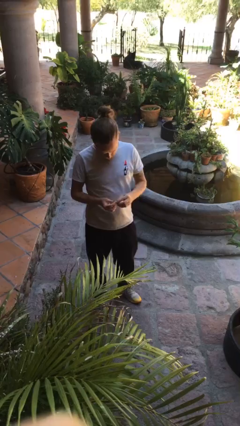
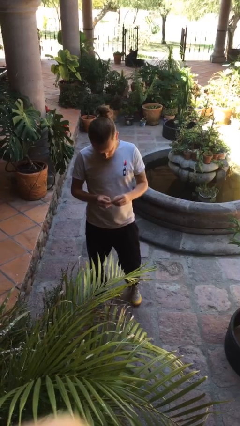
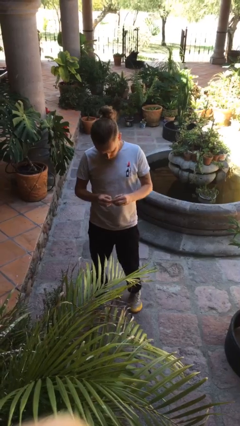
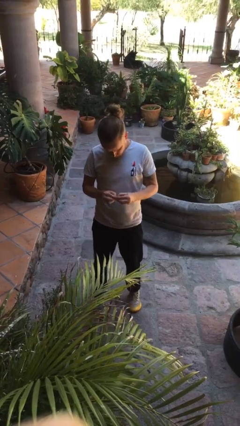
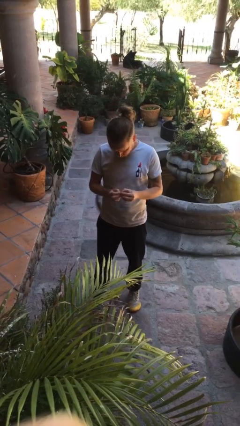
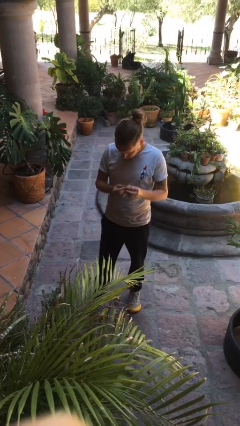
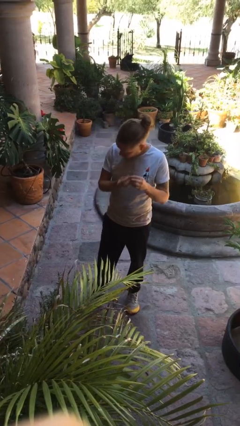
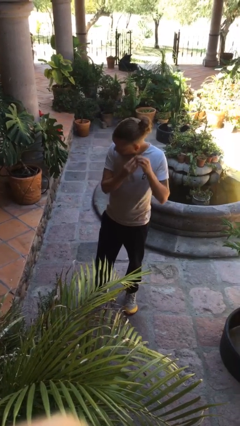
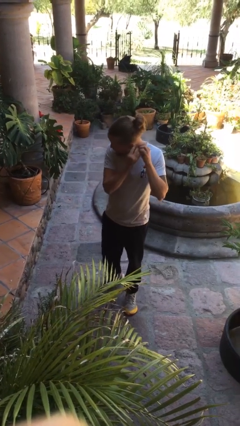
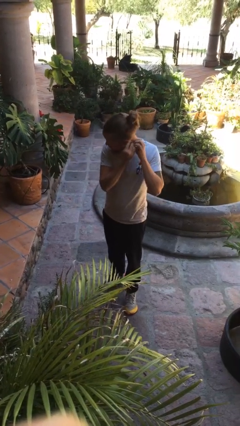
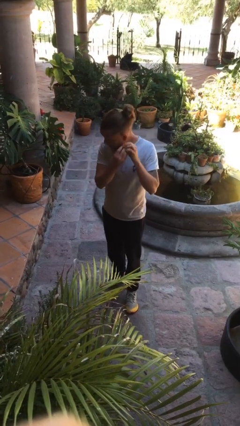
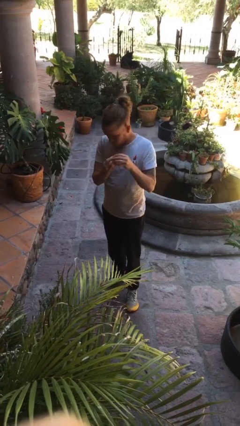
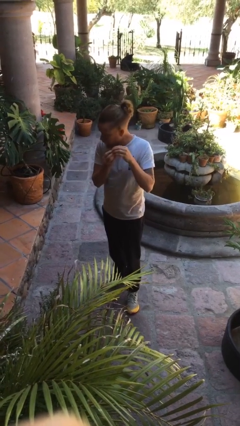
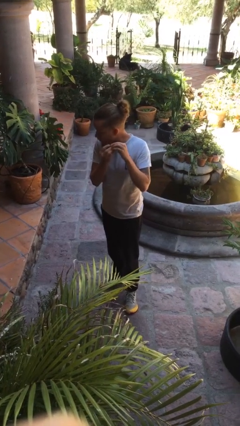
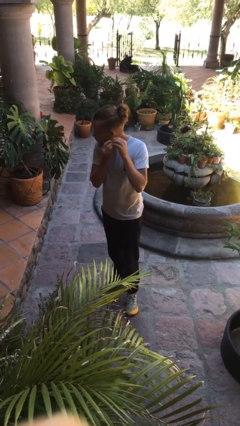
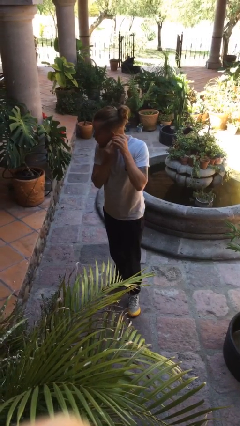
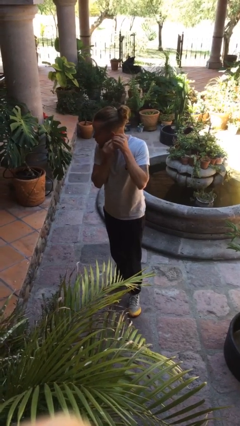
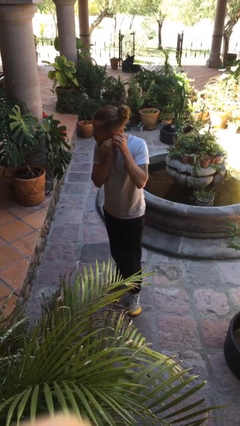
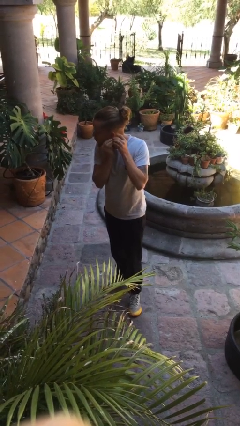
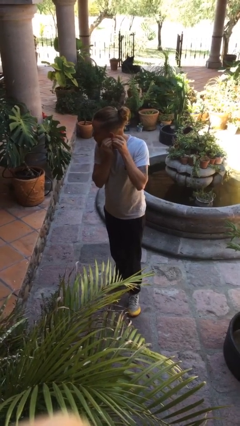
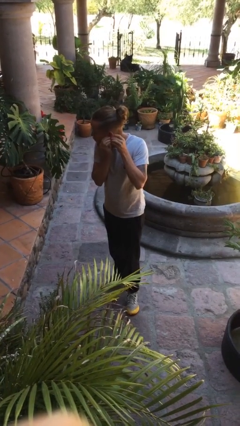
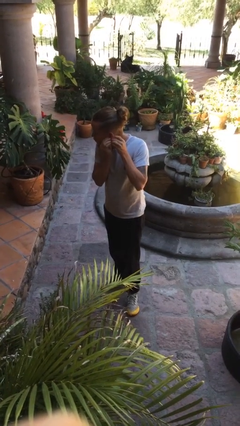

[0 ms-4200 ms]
person puts on earrings

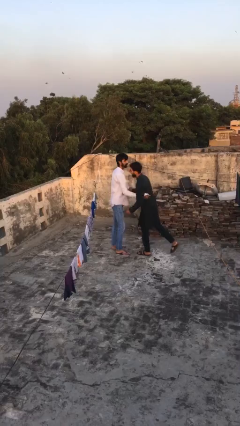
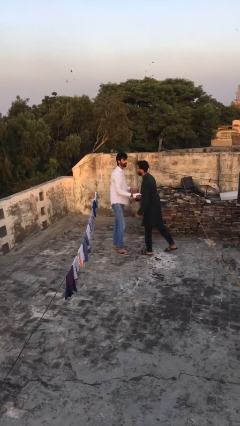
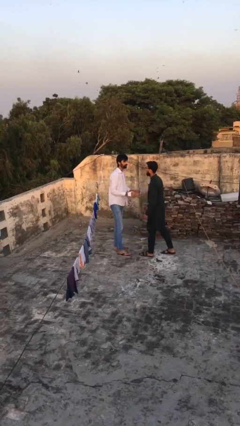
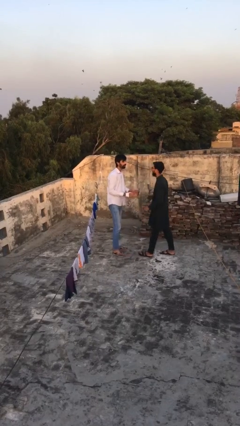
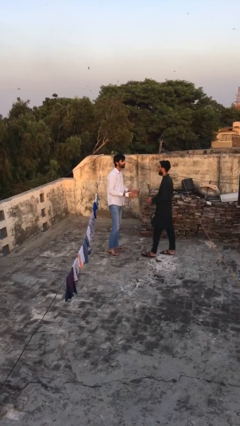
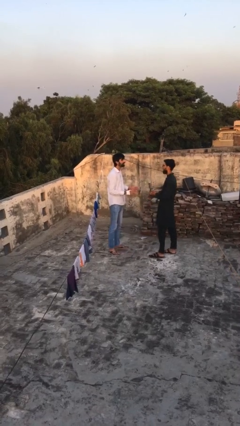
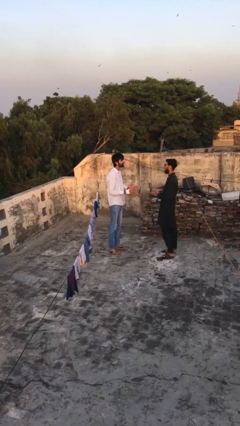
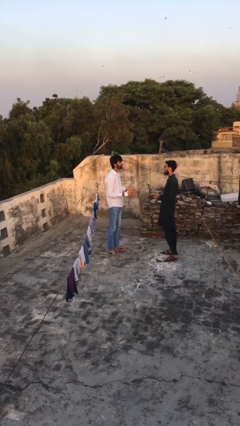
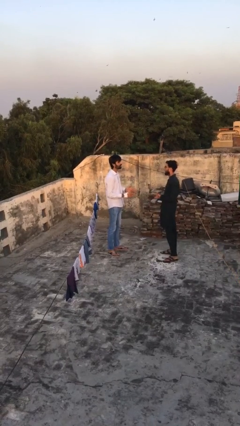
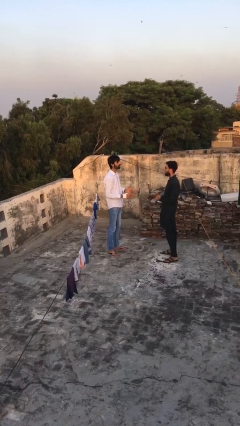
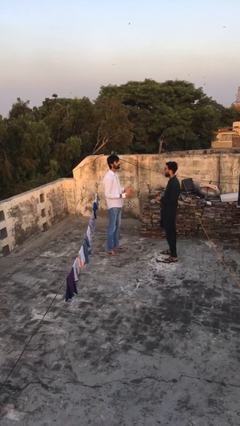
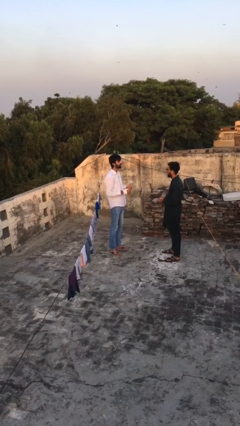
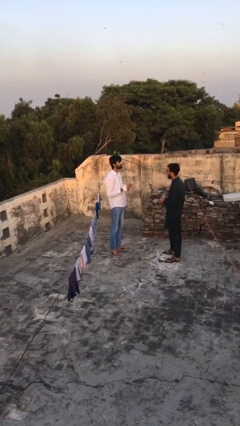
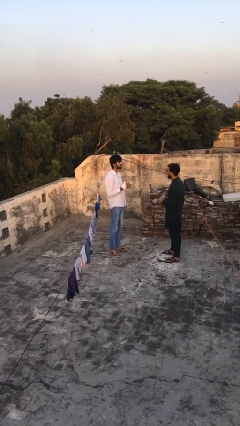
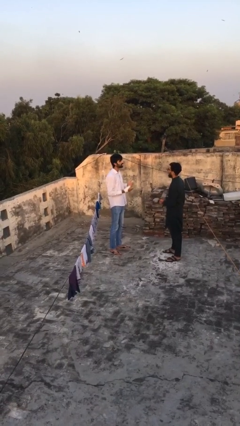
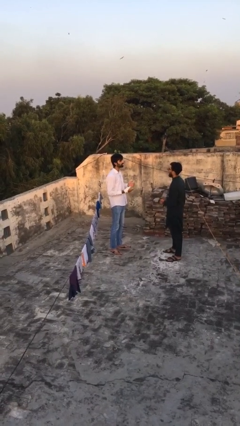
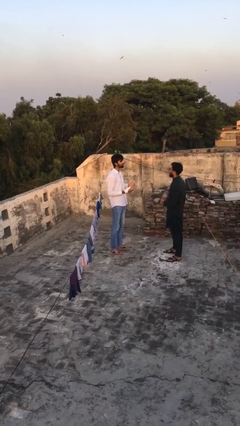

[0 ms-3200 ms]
person talks to person

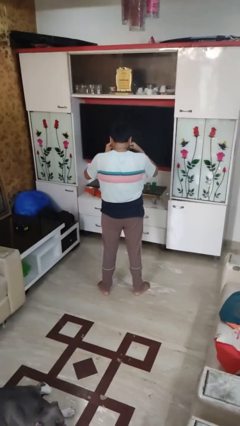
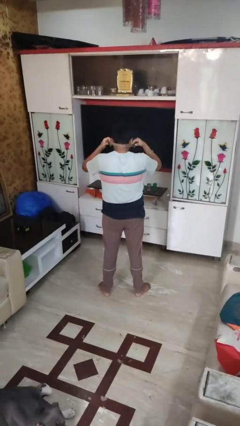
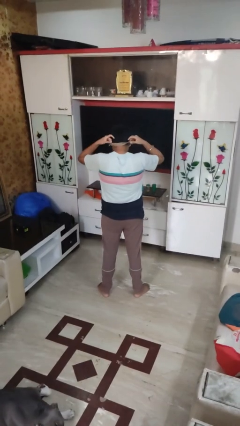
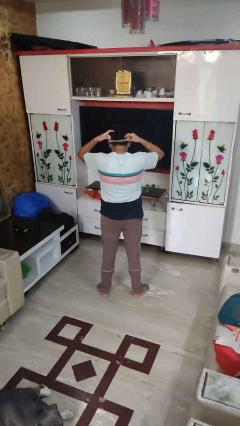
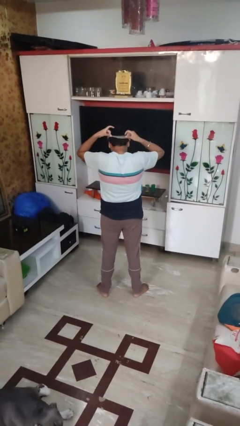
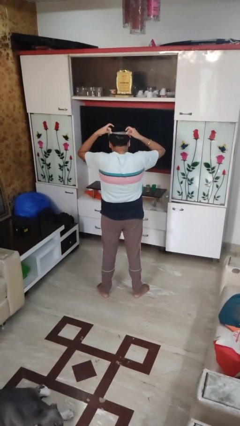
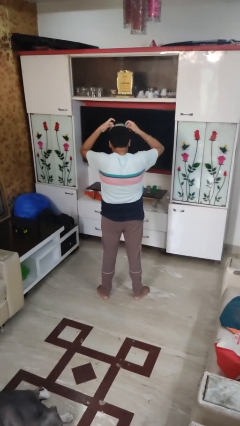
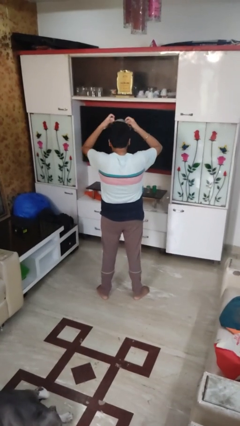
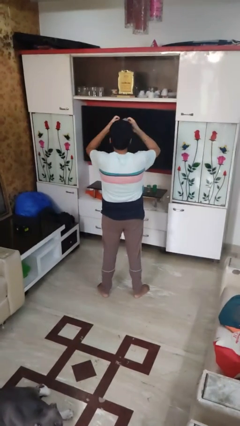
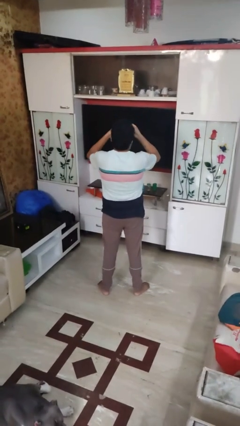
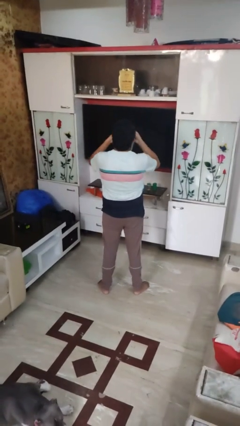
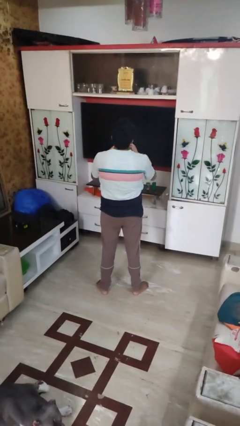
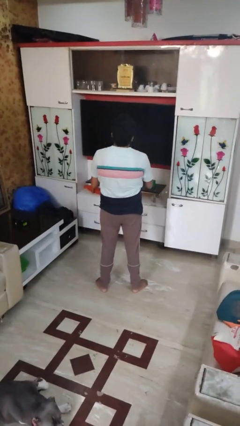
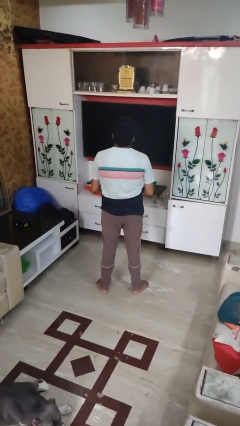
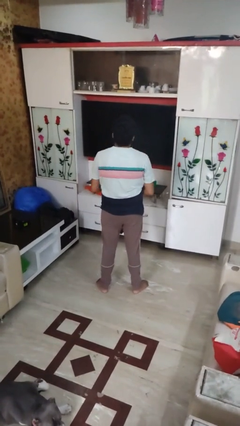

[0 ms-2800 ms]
person takes off necktie

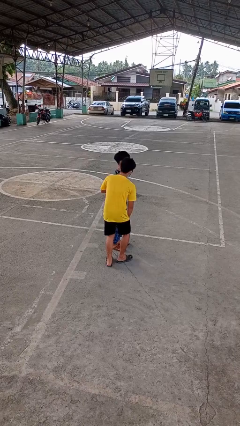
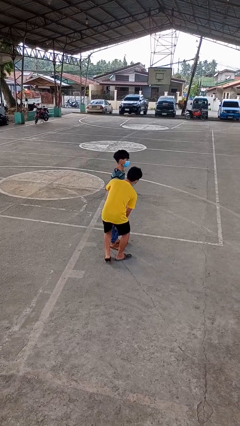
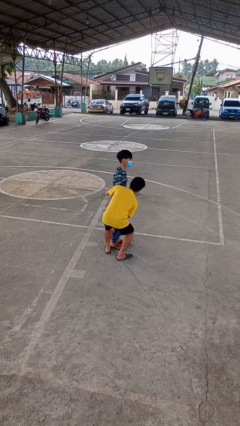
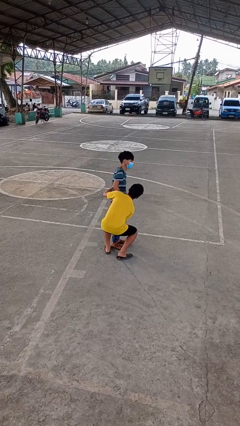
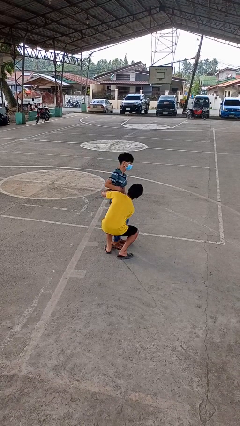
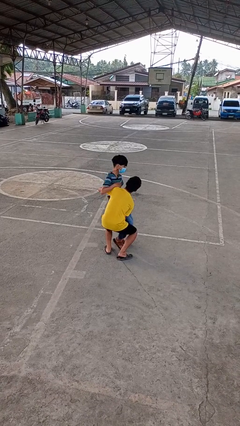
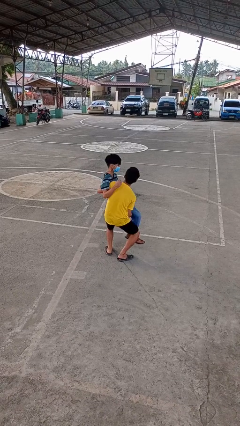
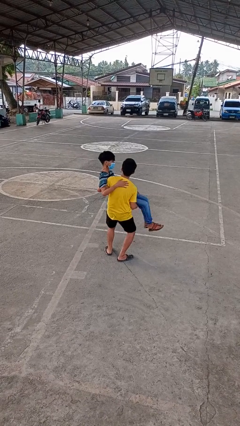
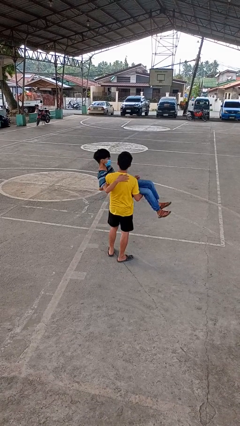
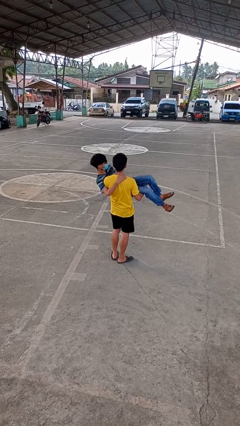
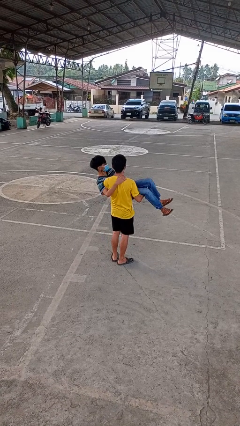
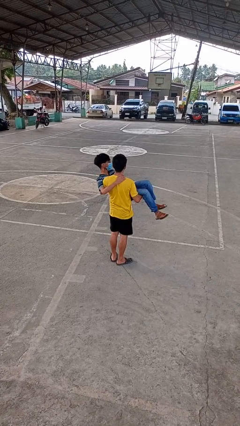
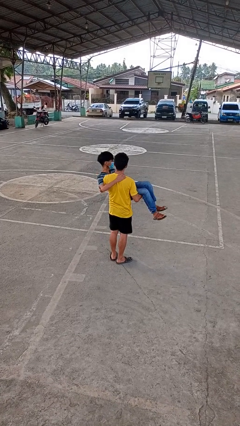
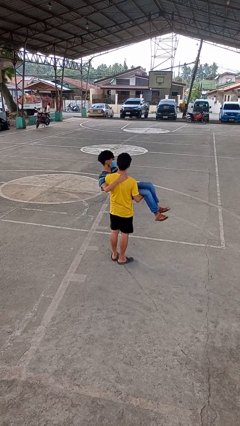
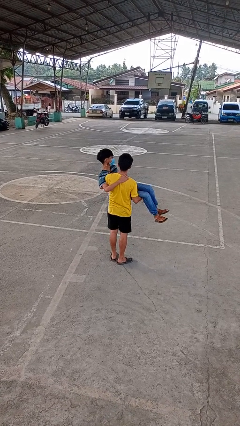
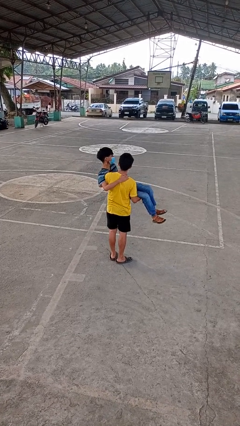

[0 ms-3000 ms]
person picks up person

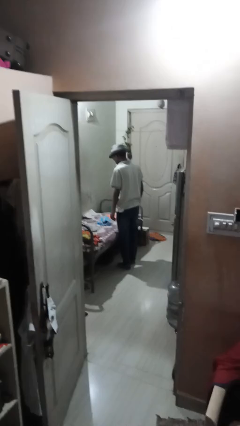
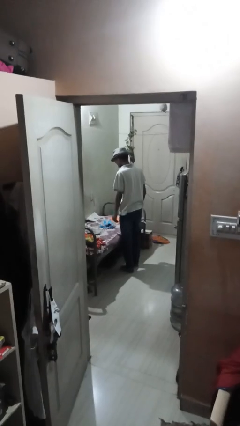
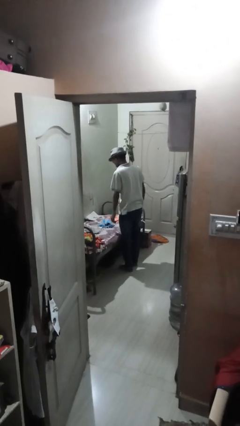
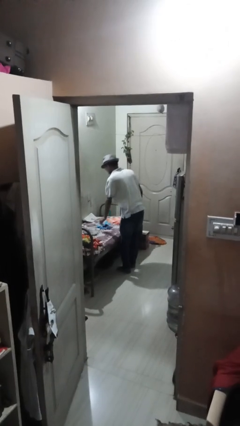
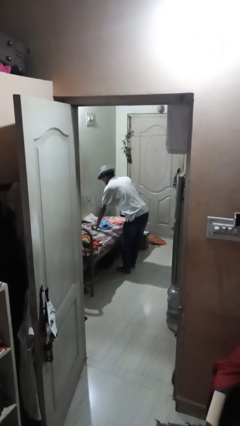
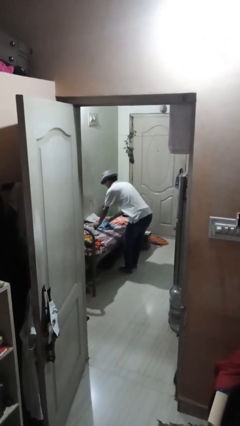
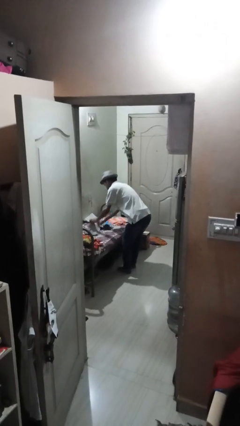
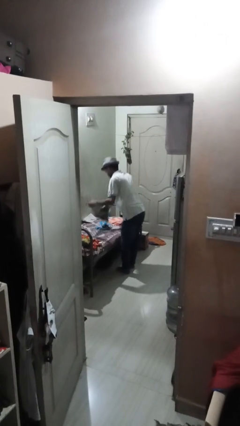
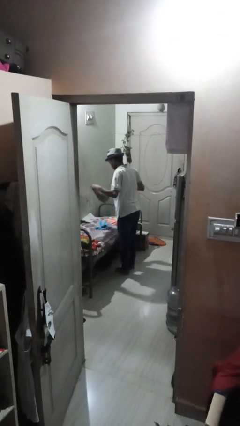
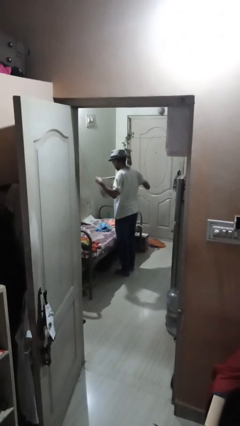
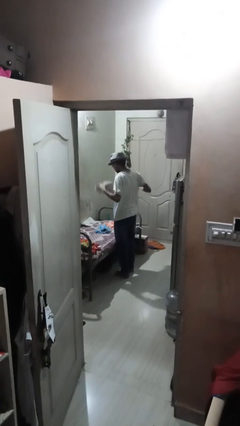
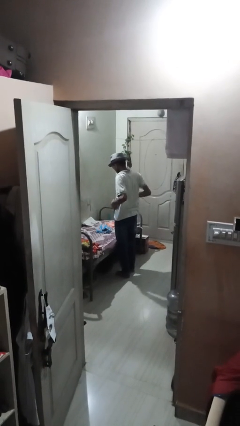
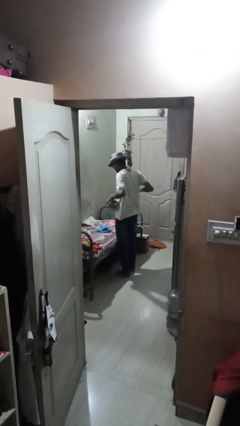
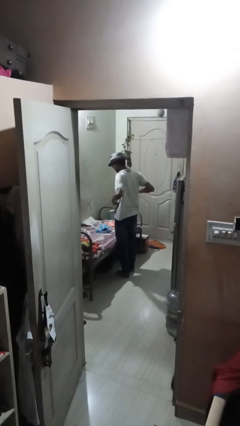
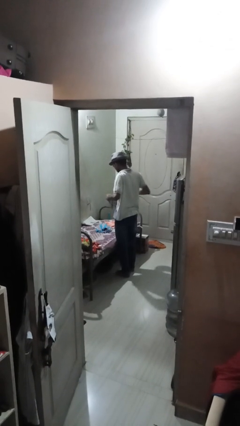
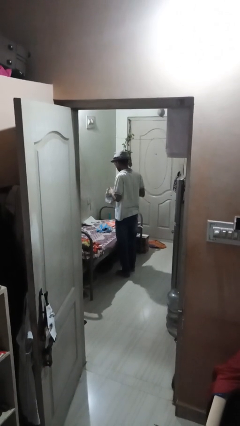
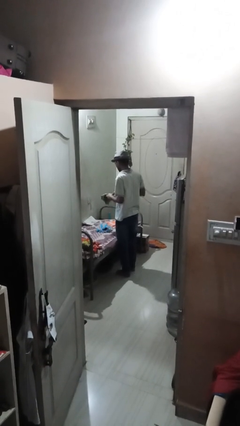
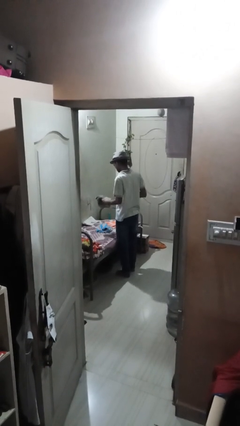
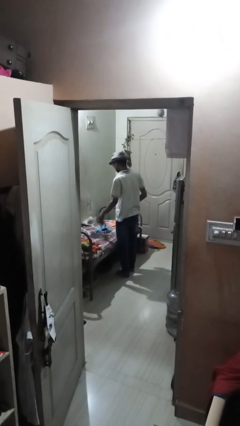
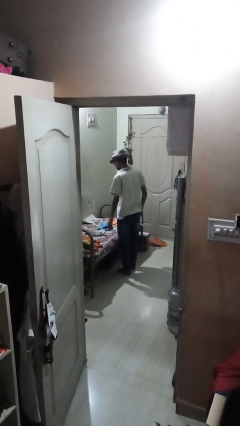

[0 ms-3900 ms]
person folds towel

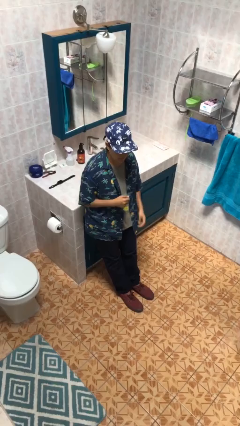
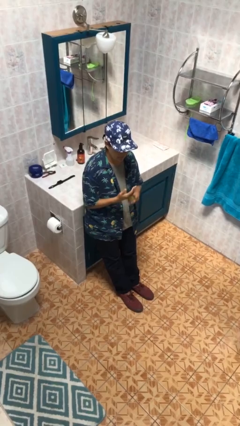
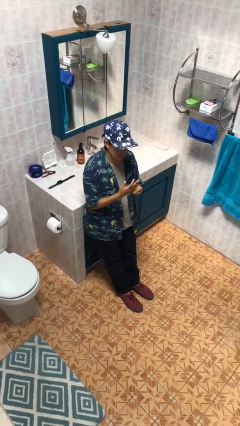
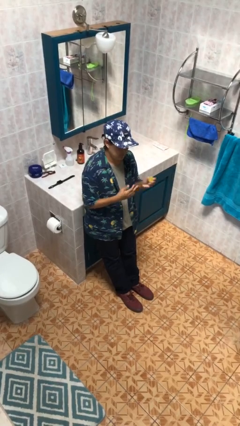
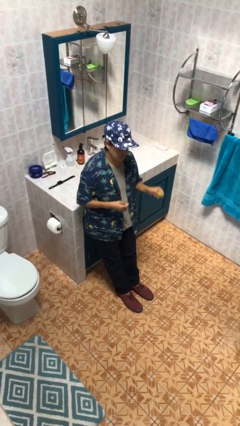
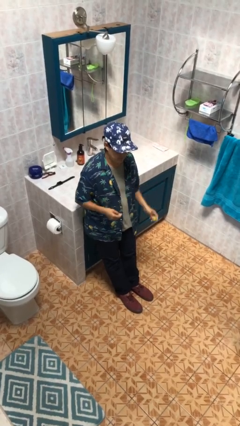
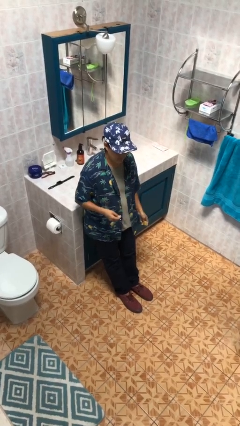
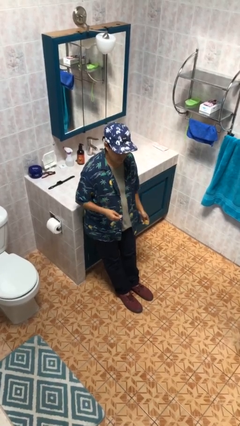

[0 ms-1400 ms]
person takes off ring
